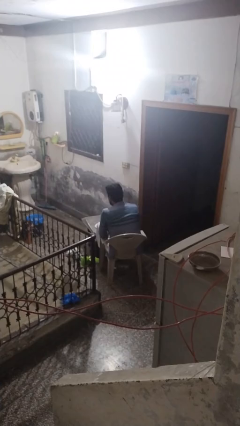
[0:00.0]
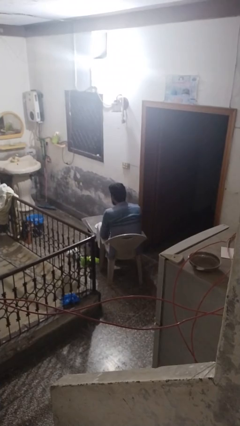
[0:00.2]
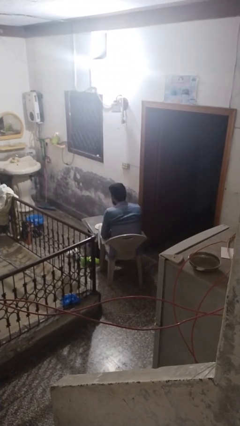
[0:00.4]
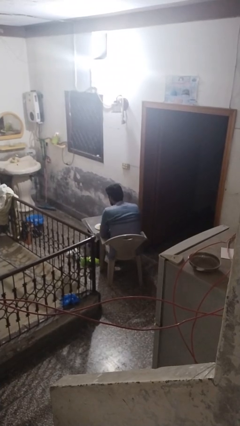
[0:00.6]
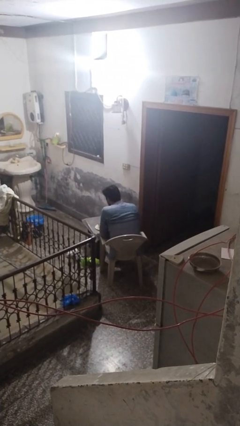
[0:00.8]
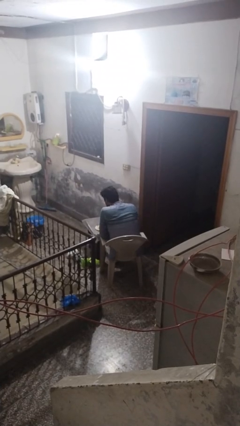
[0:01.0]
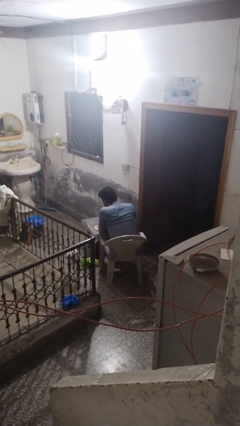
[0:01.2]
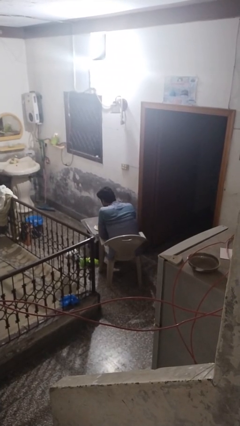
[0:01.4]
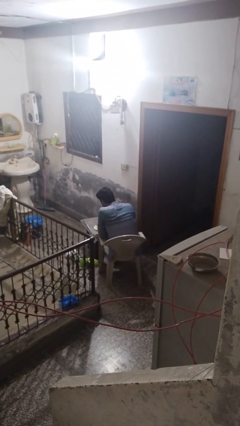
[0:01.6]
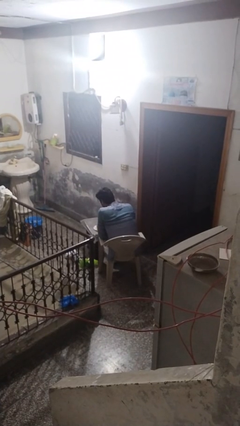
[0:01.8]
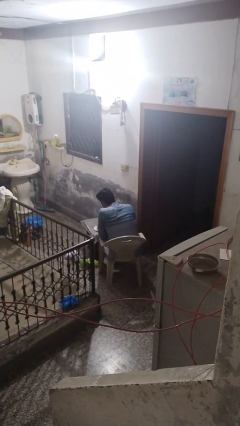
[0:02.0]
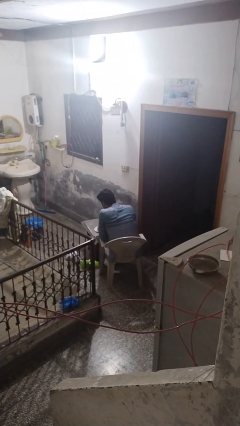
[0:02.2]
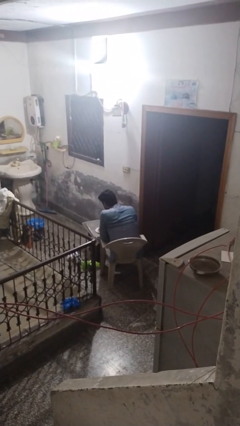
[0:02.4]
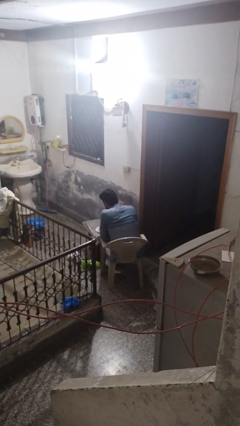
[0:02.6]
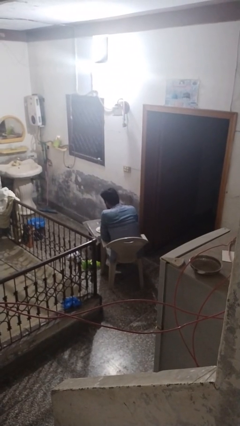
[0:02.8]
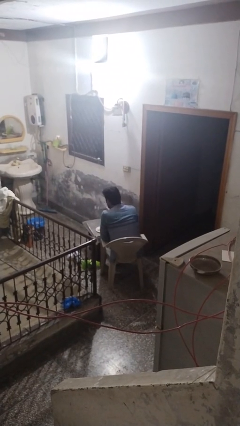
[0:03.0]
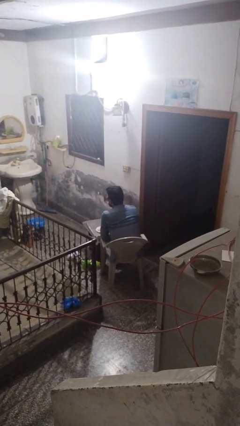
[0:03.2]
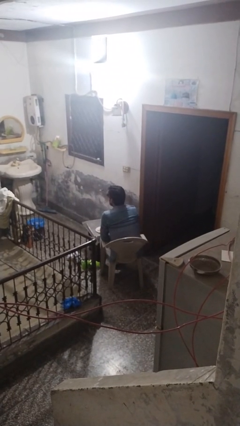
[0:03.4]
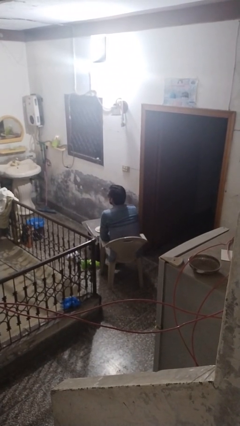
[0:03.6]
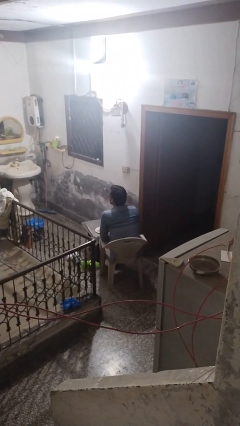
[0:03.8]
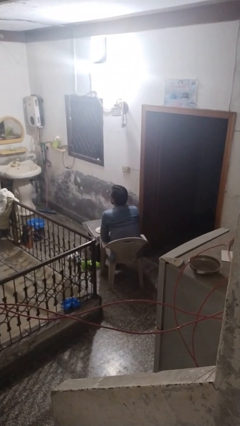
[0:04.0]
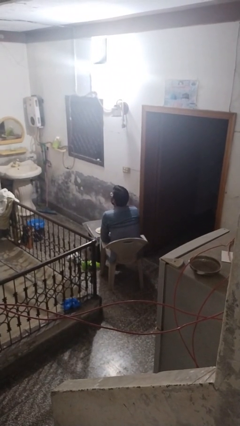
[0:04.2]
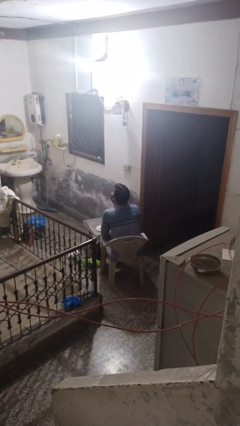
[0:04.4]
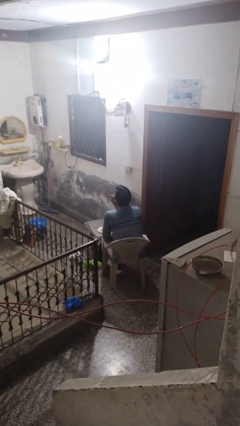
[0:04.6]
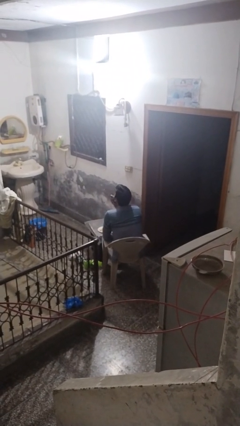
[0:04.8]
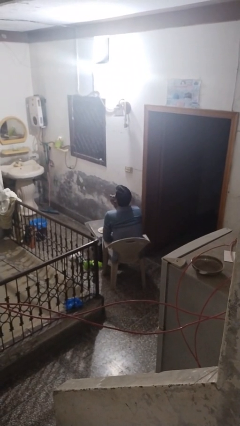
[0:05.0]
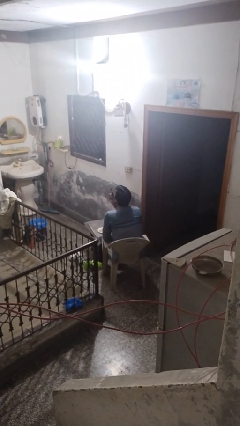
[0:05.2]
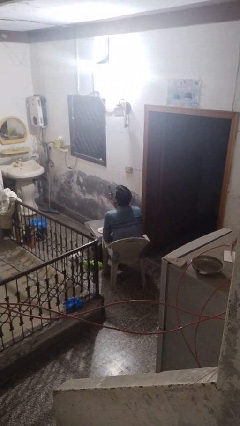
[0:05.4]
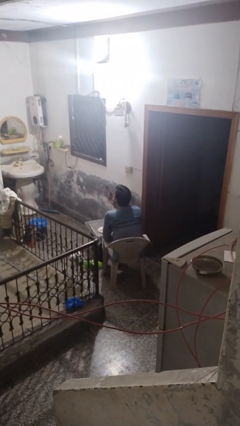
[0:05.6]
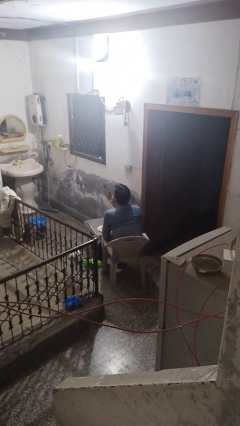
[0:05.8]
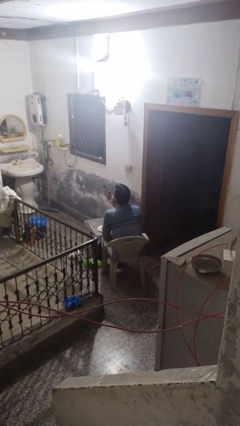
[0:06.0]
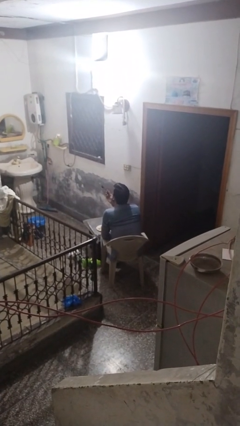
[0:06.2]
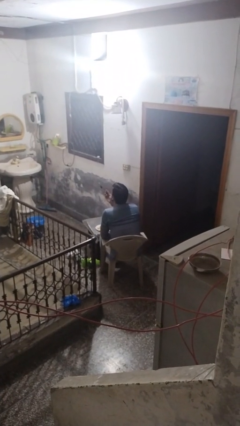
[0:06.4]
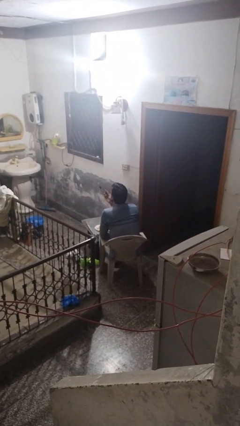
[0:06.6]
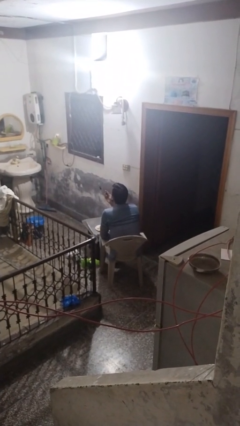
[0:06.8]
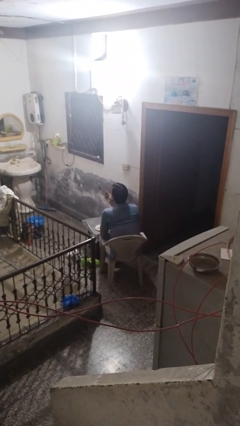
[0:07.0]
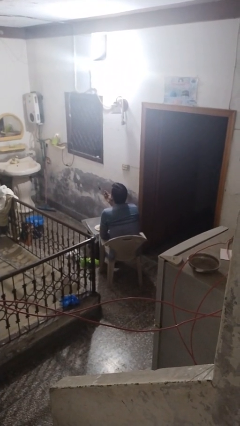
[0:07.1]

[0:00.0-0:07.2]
person eats with utensil

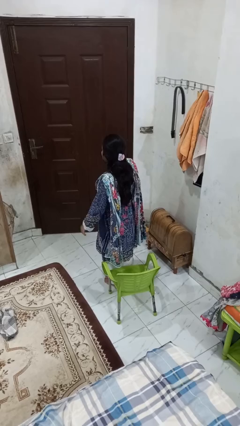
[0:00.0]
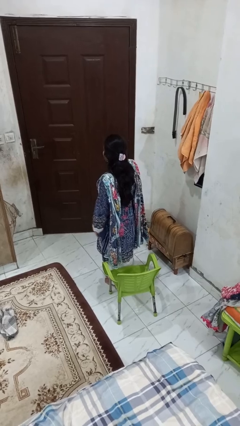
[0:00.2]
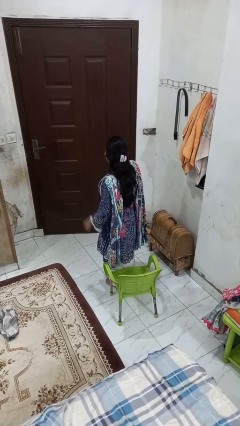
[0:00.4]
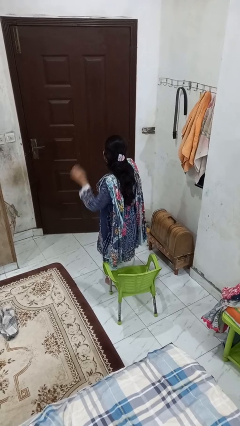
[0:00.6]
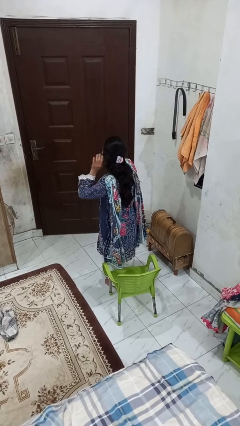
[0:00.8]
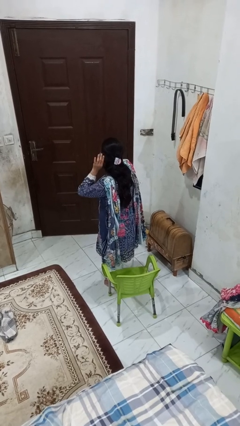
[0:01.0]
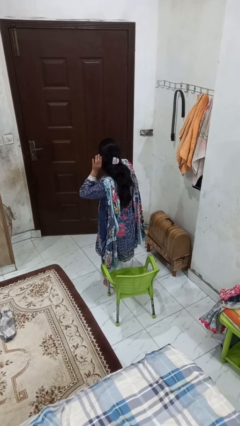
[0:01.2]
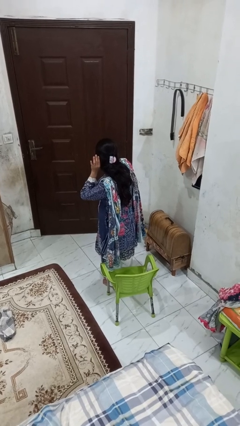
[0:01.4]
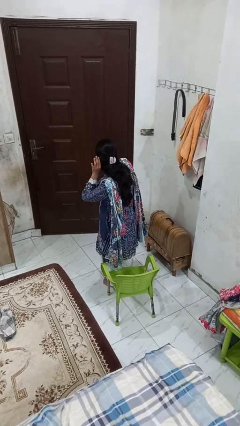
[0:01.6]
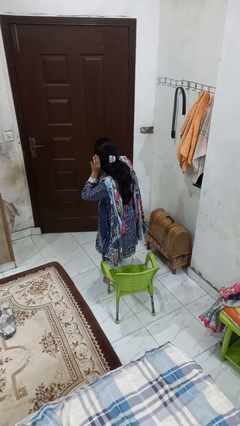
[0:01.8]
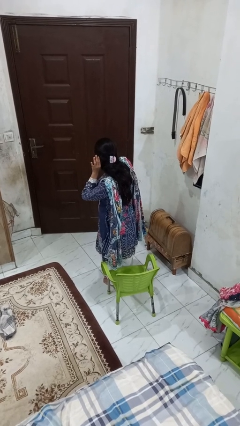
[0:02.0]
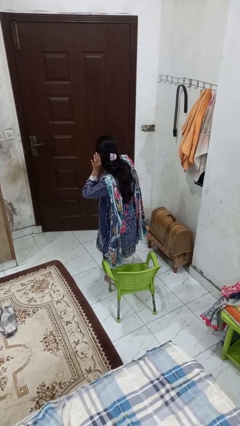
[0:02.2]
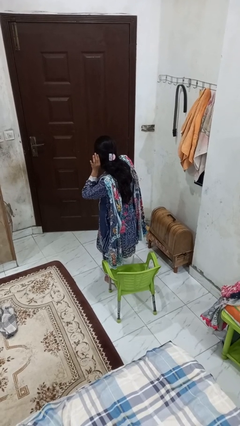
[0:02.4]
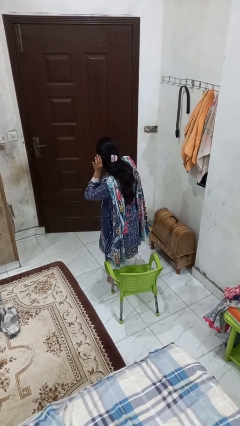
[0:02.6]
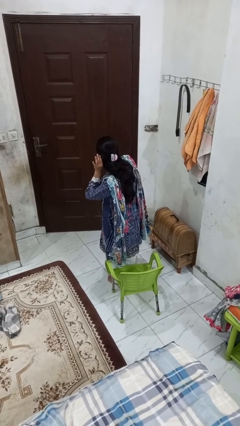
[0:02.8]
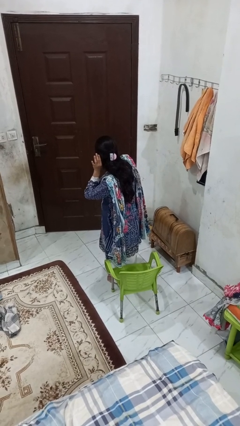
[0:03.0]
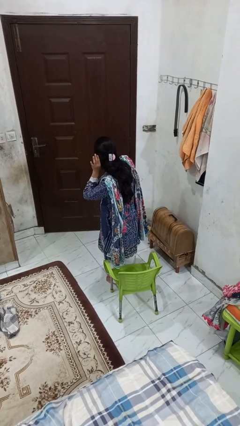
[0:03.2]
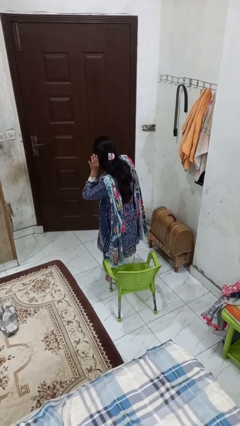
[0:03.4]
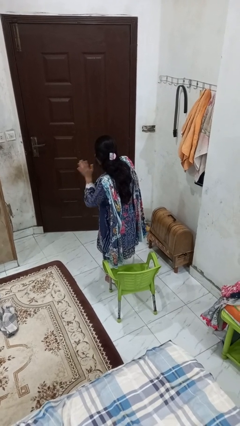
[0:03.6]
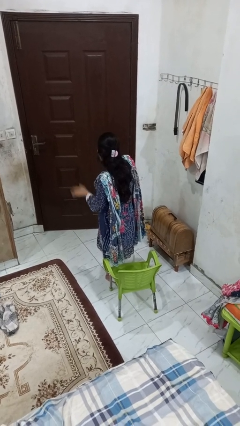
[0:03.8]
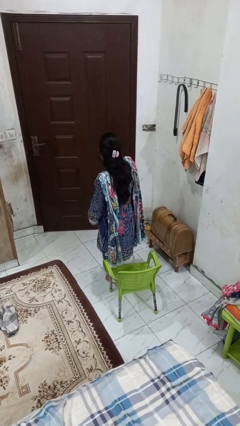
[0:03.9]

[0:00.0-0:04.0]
person gestures listen closely

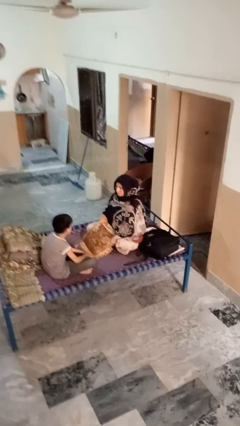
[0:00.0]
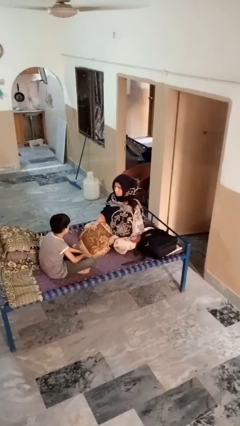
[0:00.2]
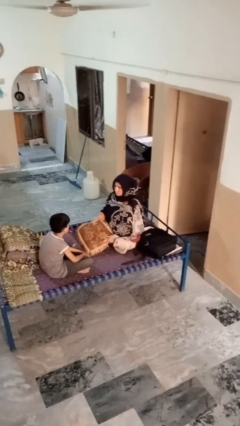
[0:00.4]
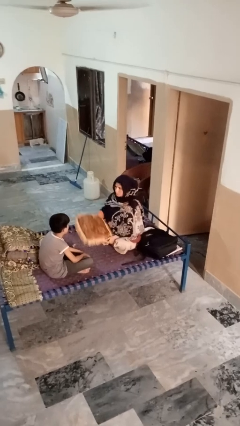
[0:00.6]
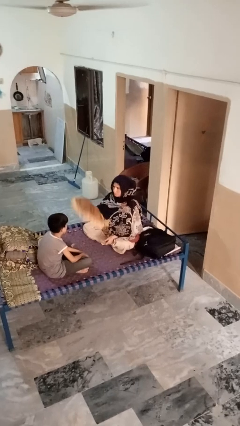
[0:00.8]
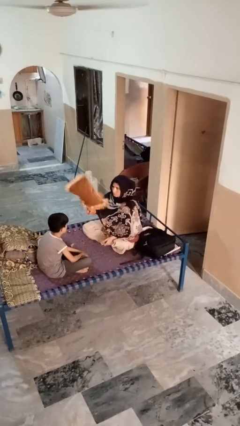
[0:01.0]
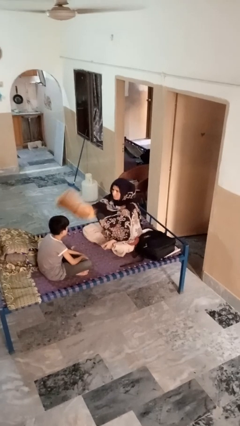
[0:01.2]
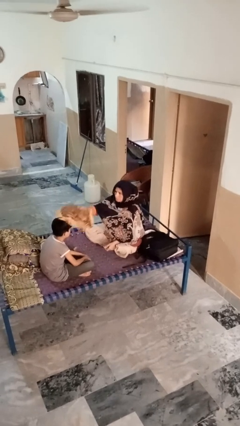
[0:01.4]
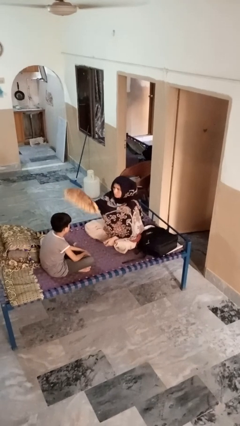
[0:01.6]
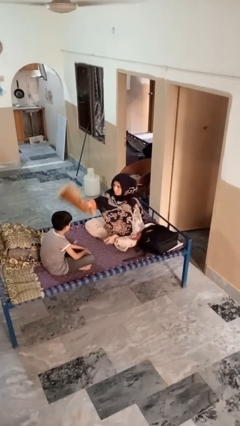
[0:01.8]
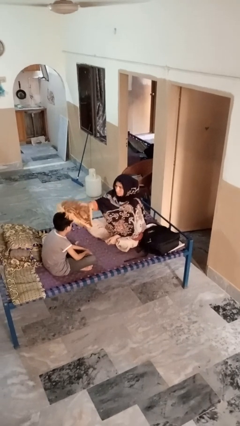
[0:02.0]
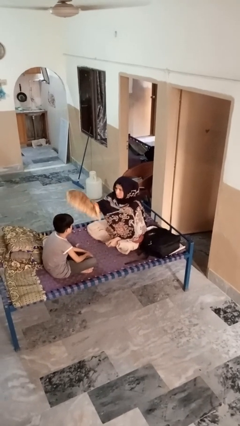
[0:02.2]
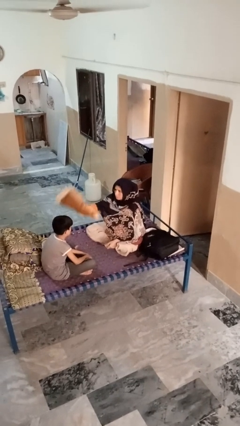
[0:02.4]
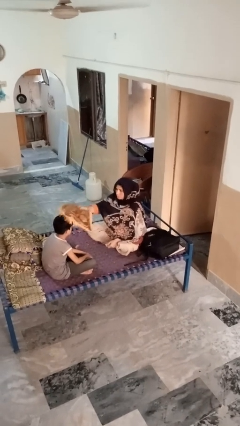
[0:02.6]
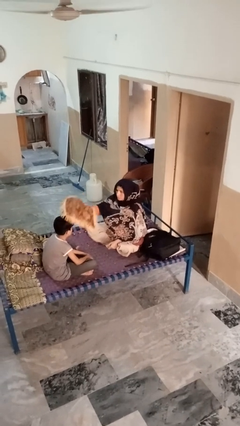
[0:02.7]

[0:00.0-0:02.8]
person hits person with pillow

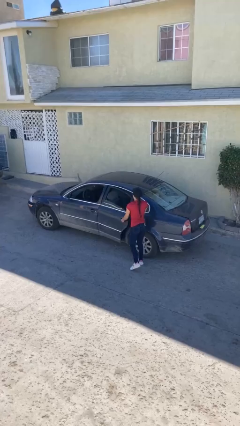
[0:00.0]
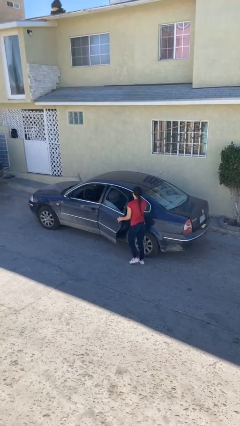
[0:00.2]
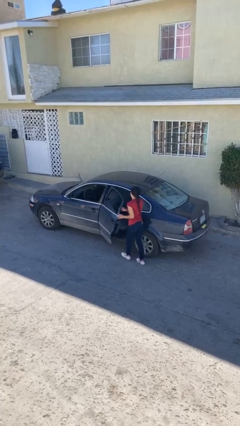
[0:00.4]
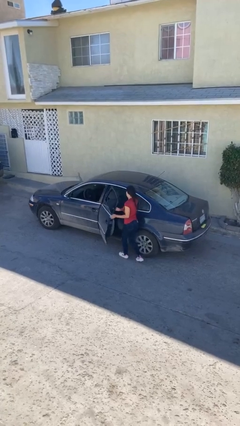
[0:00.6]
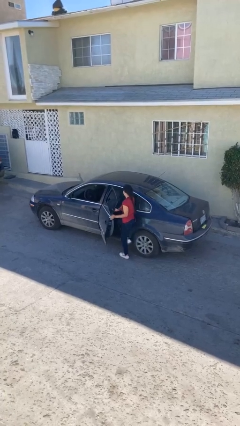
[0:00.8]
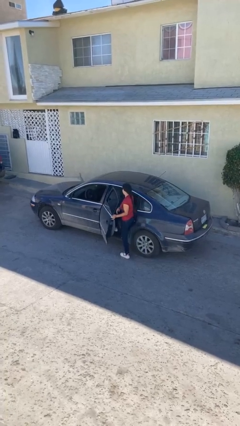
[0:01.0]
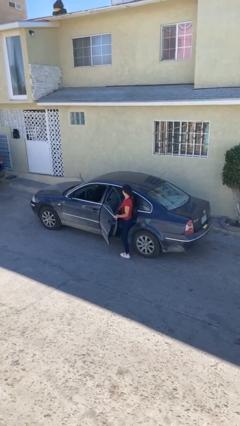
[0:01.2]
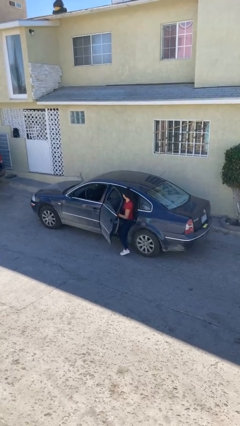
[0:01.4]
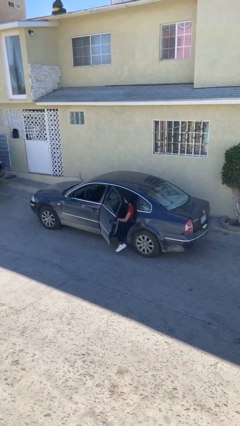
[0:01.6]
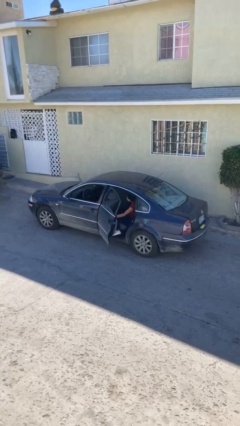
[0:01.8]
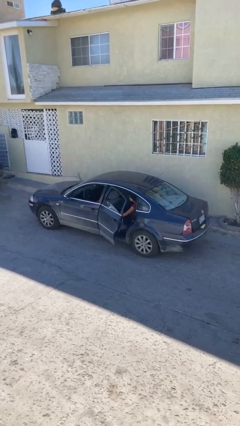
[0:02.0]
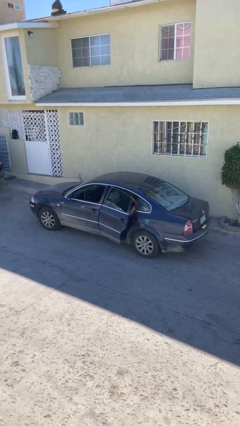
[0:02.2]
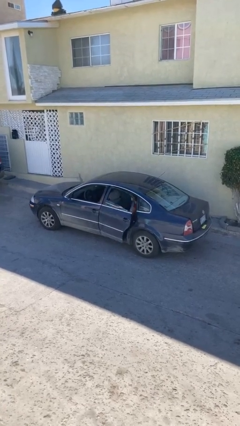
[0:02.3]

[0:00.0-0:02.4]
car picks up person

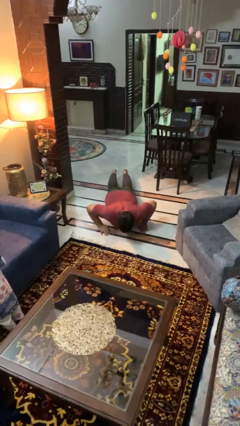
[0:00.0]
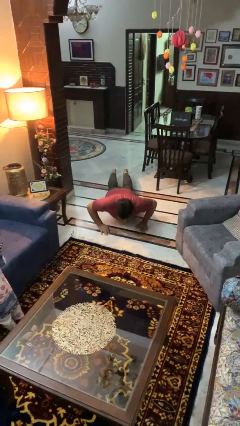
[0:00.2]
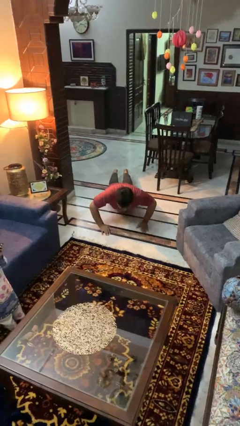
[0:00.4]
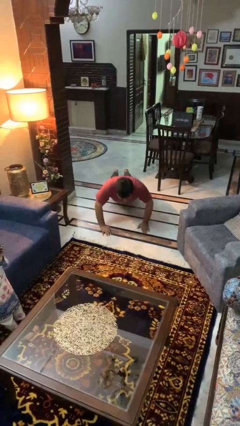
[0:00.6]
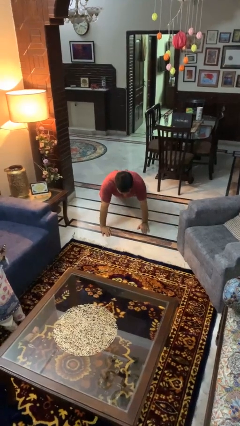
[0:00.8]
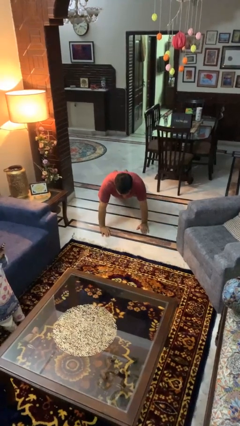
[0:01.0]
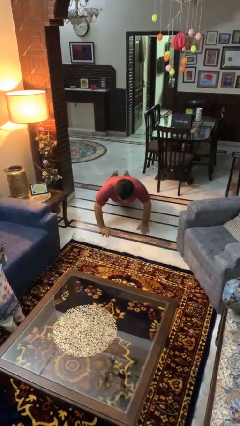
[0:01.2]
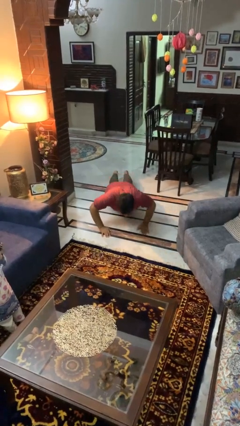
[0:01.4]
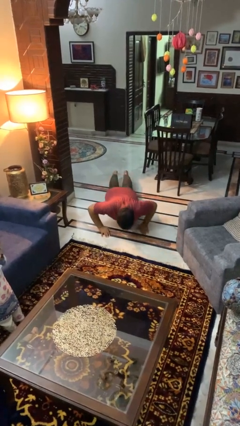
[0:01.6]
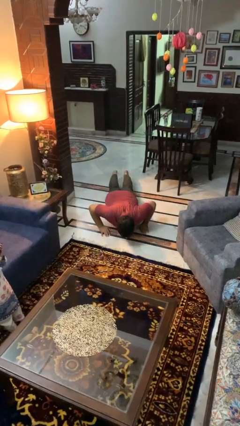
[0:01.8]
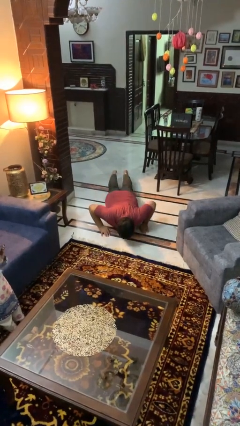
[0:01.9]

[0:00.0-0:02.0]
person exercises with pushup
